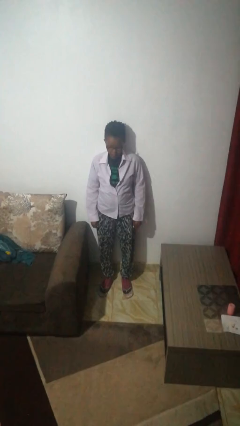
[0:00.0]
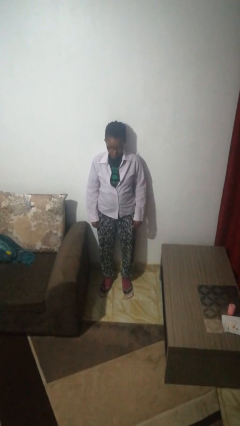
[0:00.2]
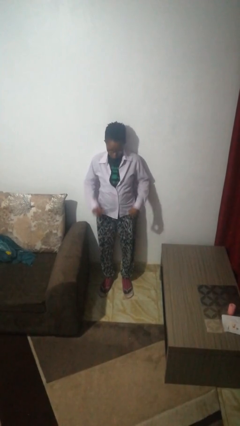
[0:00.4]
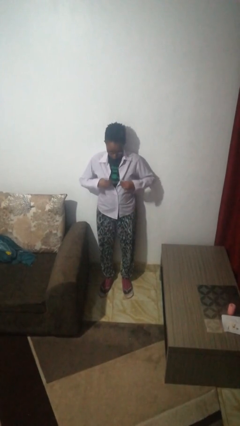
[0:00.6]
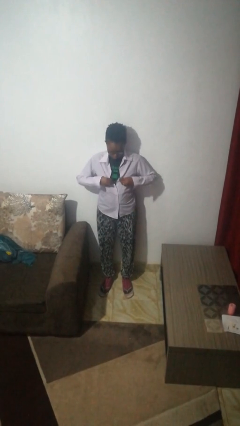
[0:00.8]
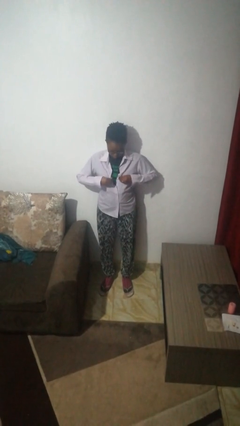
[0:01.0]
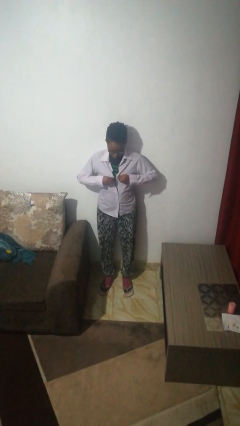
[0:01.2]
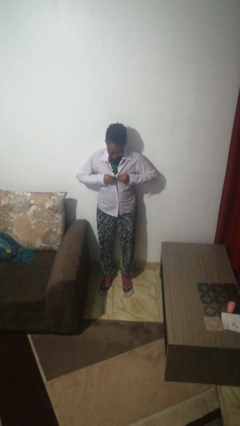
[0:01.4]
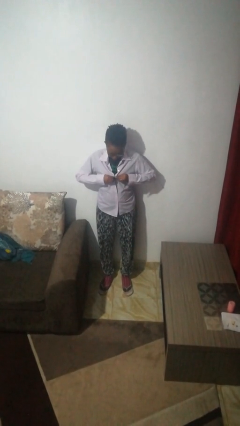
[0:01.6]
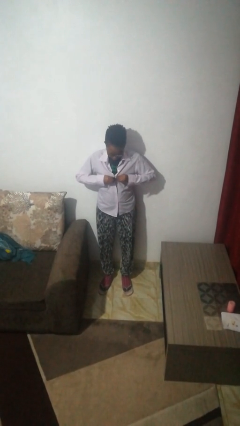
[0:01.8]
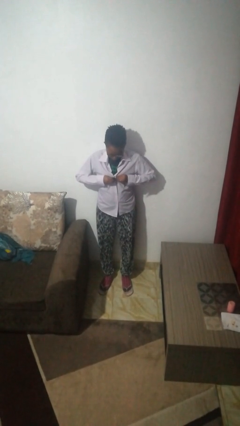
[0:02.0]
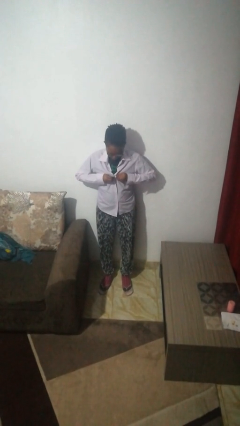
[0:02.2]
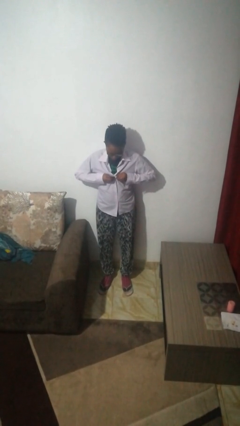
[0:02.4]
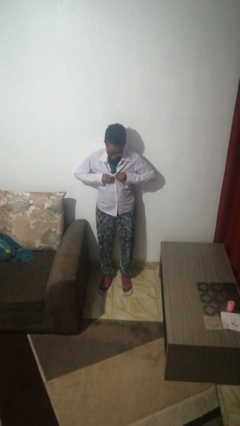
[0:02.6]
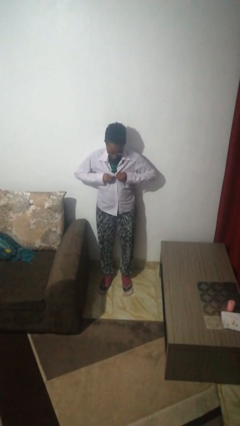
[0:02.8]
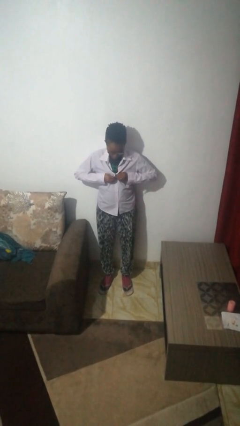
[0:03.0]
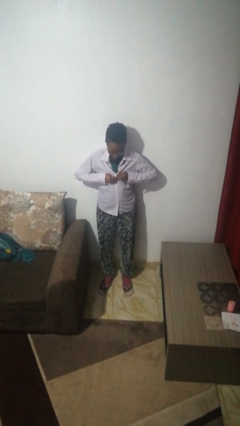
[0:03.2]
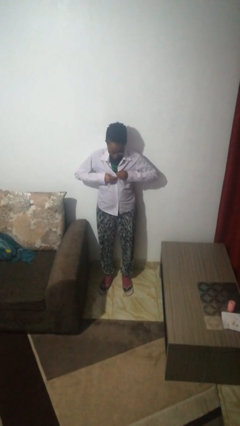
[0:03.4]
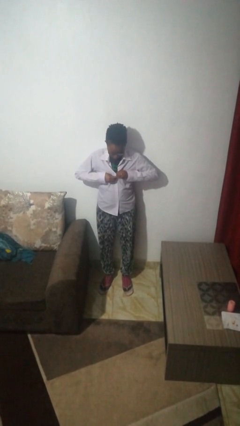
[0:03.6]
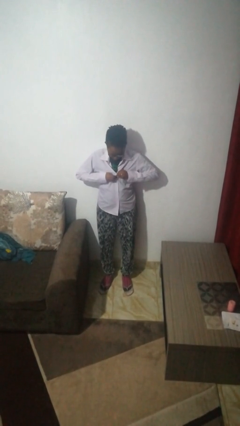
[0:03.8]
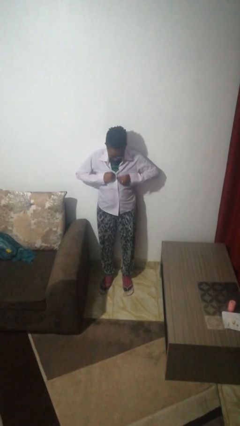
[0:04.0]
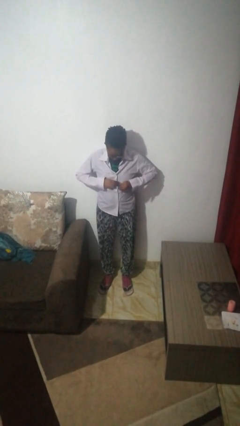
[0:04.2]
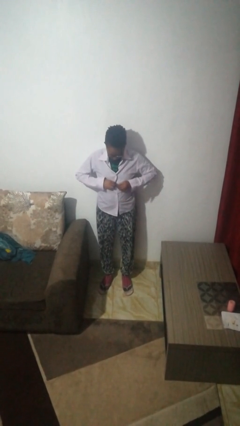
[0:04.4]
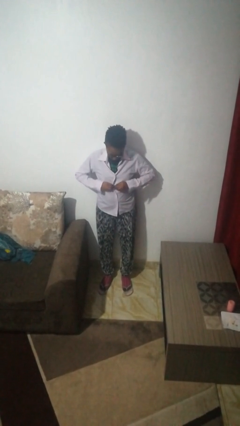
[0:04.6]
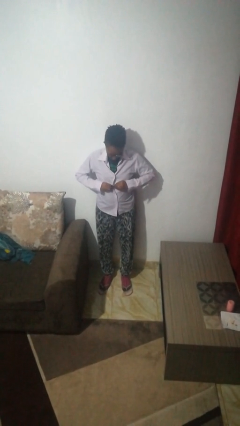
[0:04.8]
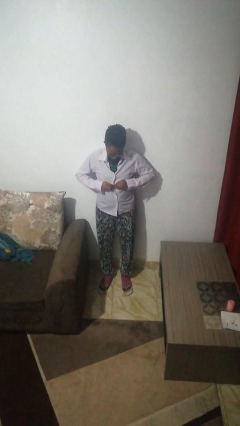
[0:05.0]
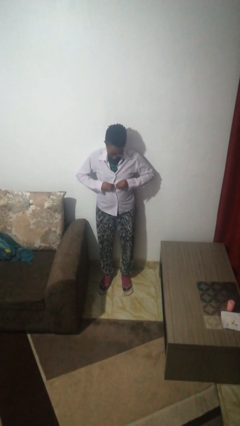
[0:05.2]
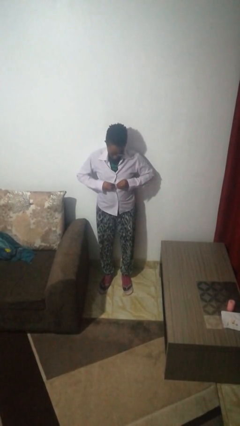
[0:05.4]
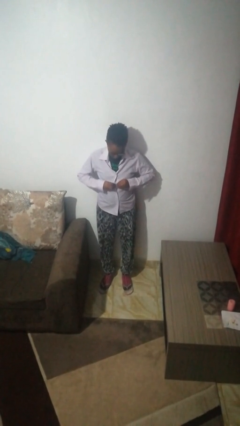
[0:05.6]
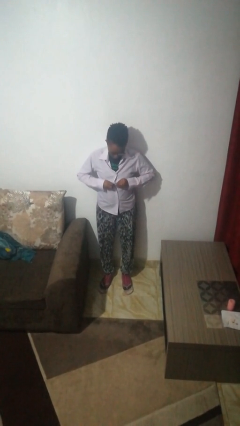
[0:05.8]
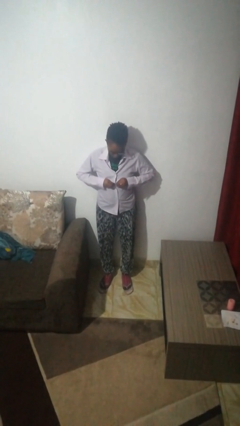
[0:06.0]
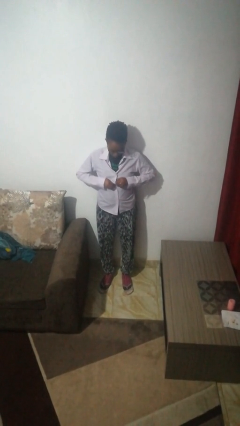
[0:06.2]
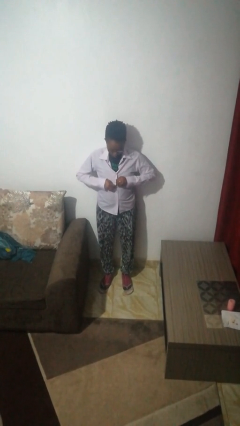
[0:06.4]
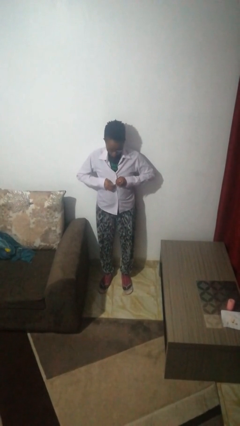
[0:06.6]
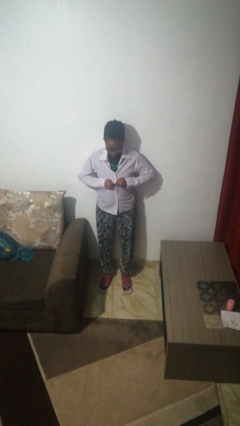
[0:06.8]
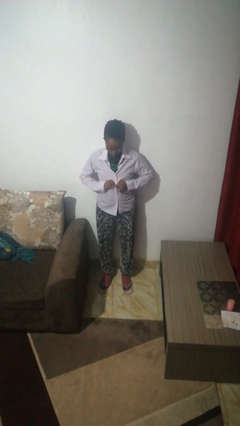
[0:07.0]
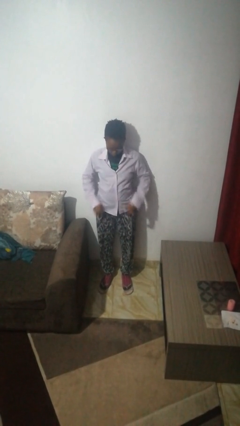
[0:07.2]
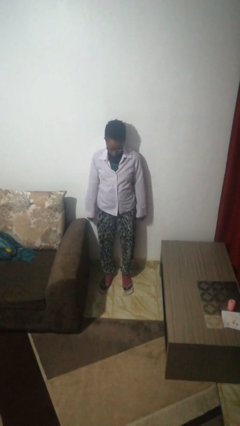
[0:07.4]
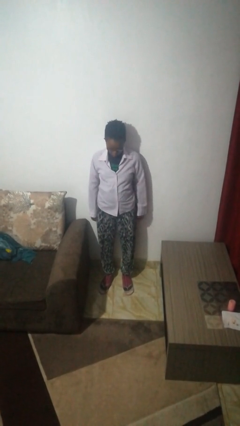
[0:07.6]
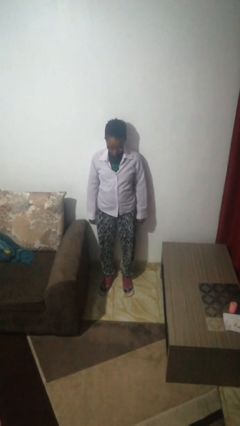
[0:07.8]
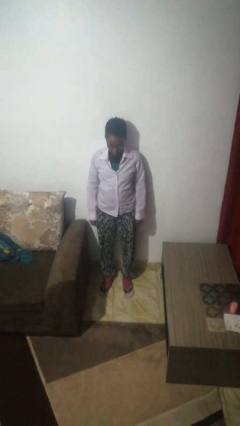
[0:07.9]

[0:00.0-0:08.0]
person buttons shirt

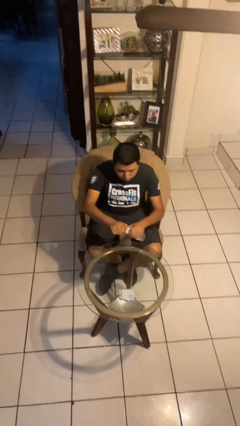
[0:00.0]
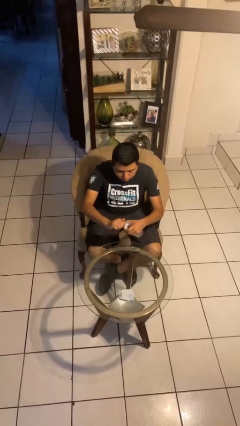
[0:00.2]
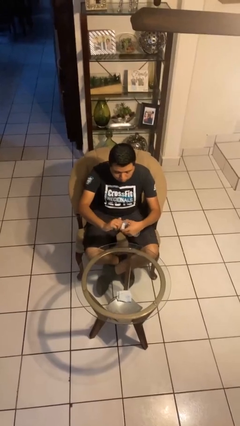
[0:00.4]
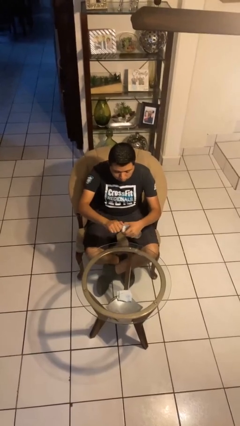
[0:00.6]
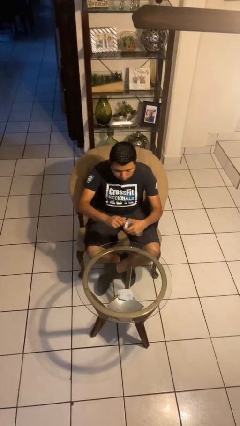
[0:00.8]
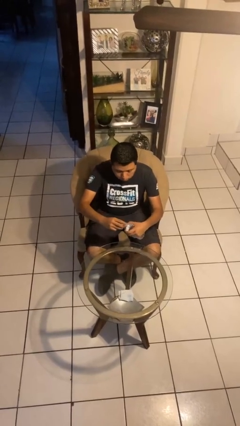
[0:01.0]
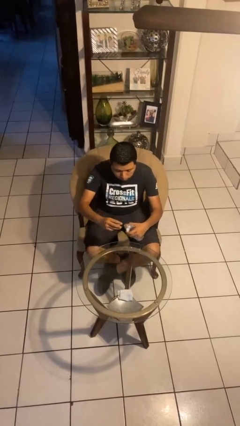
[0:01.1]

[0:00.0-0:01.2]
person unscrews lid from bottle

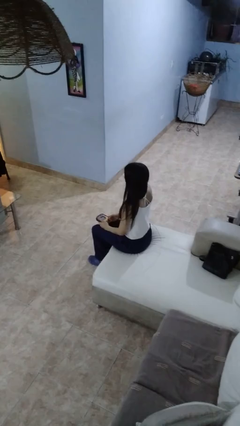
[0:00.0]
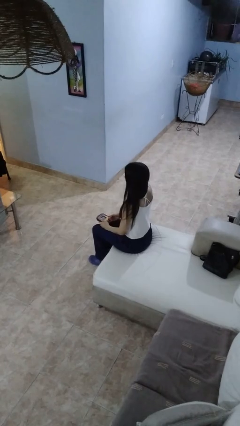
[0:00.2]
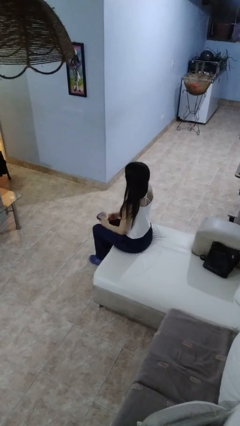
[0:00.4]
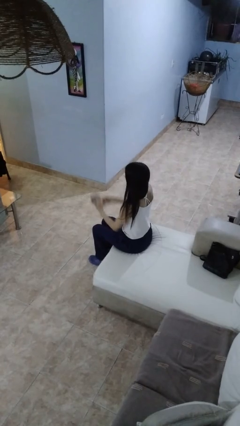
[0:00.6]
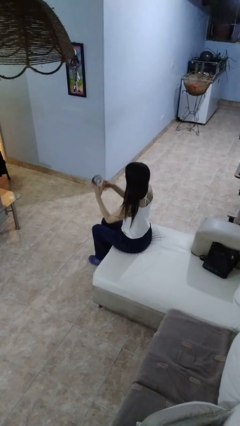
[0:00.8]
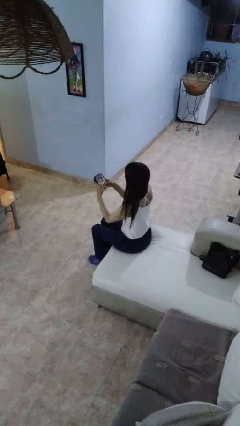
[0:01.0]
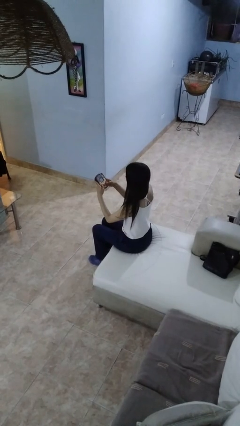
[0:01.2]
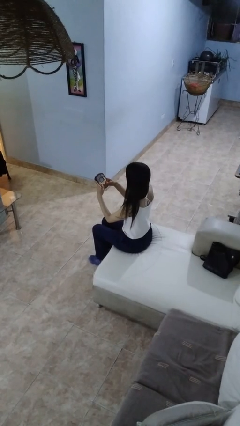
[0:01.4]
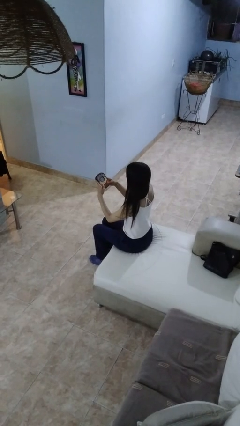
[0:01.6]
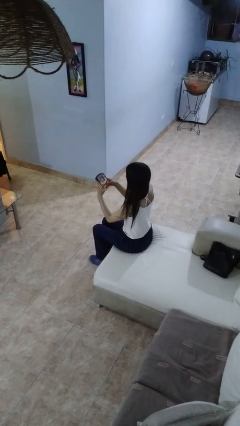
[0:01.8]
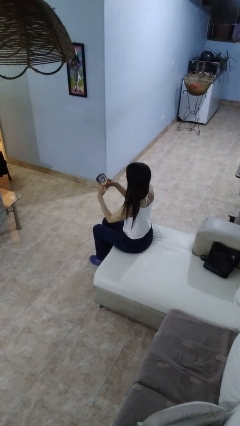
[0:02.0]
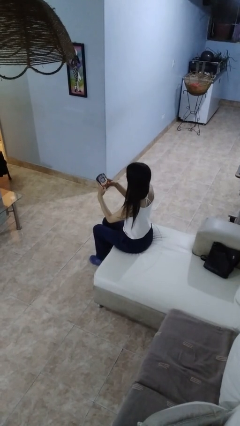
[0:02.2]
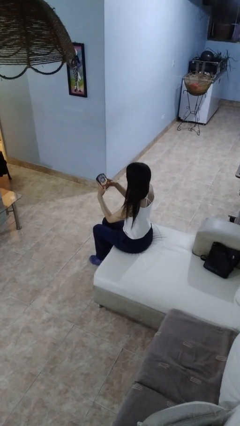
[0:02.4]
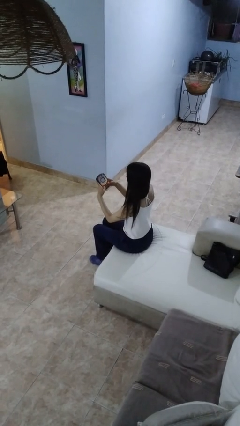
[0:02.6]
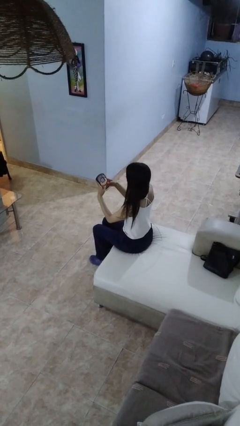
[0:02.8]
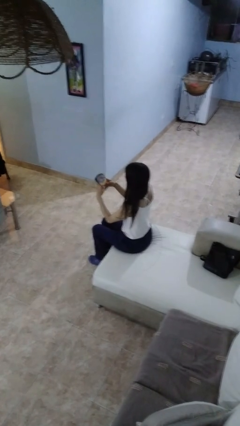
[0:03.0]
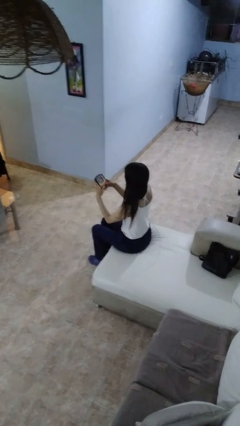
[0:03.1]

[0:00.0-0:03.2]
person interacts with handheld game

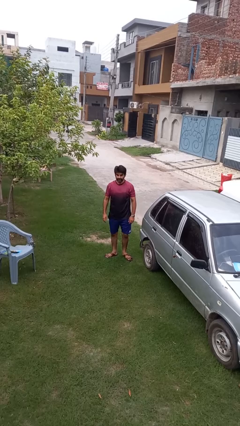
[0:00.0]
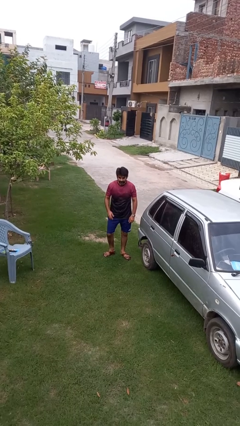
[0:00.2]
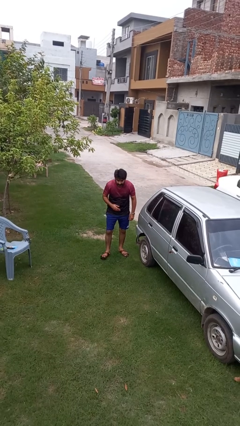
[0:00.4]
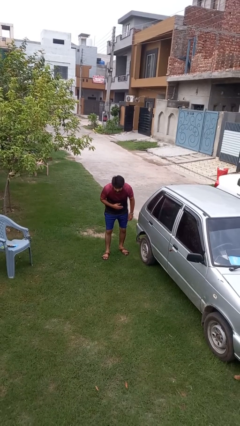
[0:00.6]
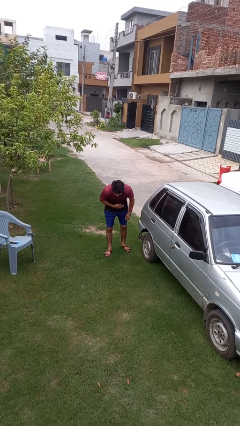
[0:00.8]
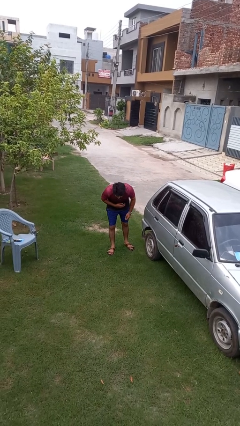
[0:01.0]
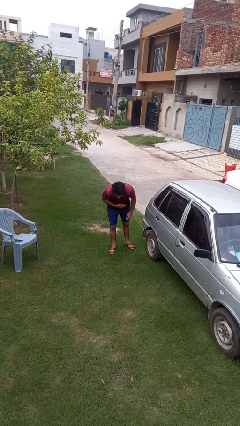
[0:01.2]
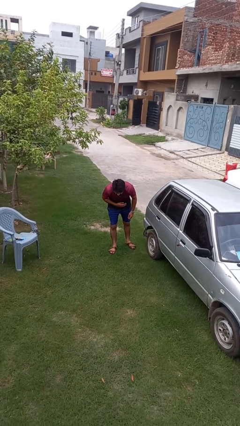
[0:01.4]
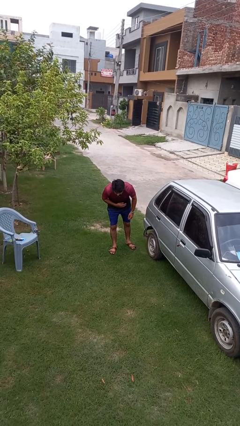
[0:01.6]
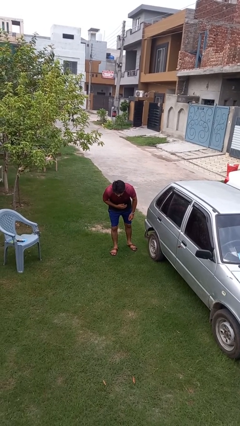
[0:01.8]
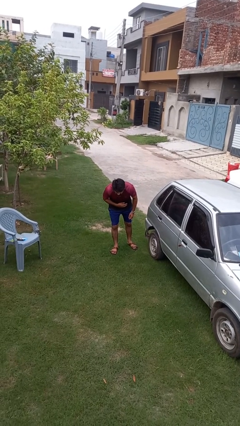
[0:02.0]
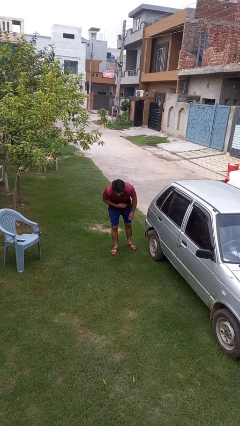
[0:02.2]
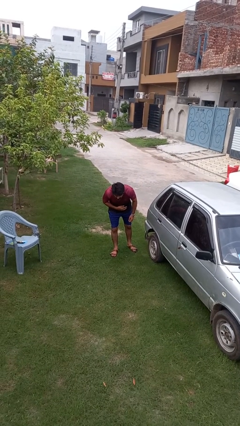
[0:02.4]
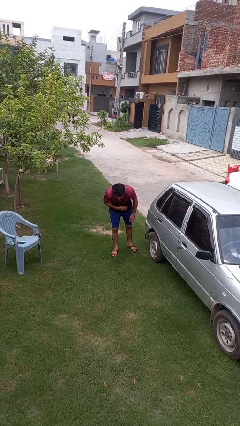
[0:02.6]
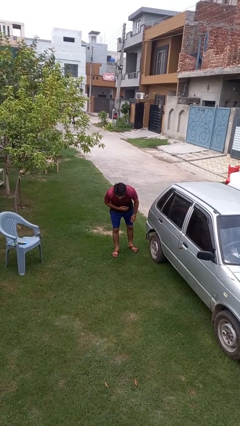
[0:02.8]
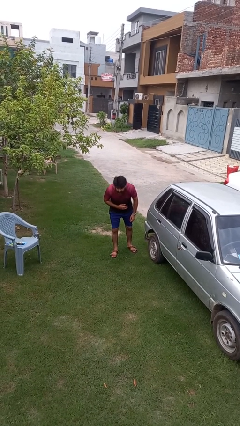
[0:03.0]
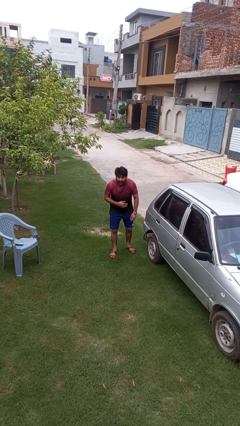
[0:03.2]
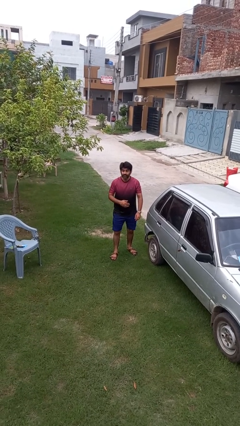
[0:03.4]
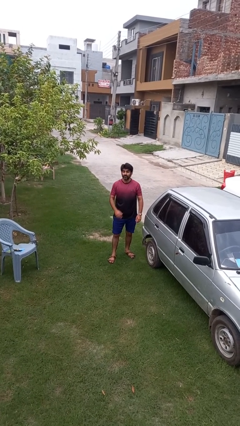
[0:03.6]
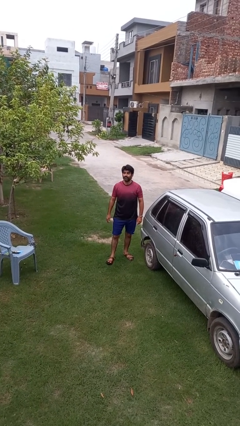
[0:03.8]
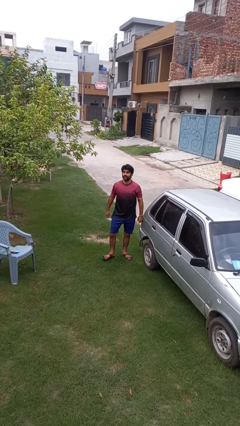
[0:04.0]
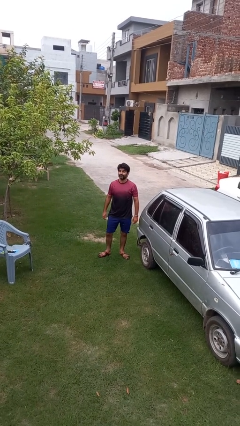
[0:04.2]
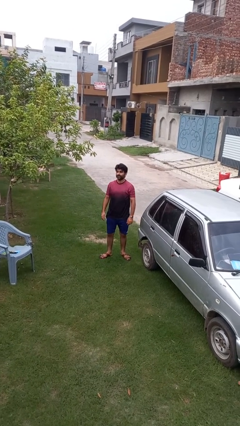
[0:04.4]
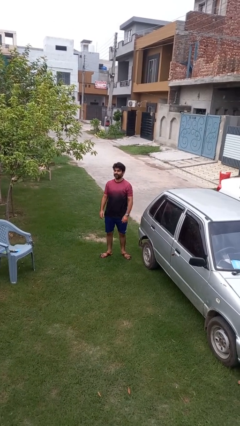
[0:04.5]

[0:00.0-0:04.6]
person bows

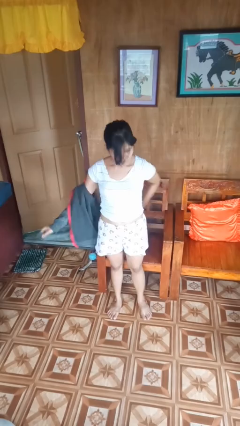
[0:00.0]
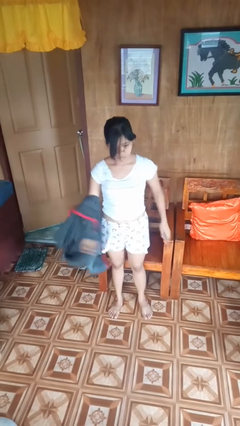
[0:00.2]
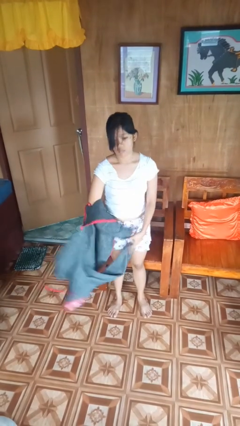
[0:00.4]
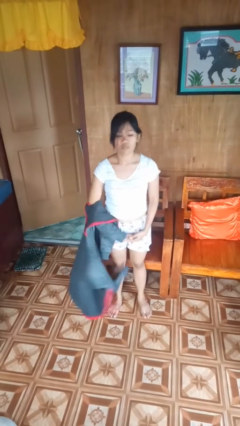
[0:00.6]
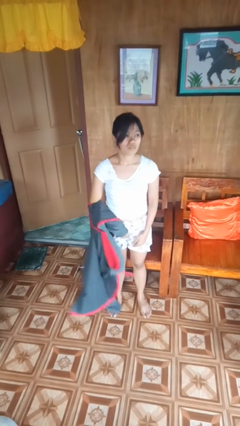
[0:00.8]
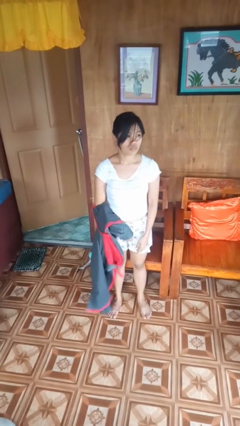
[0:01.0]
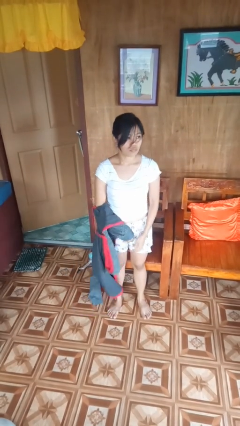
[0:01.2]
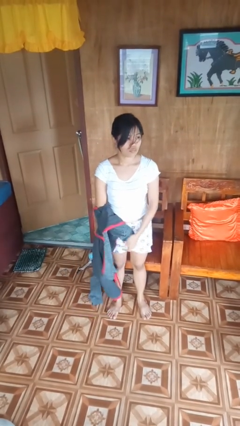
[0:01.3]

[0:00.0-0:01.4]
person takes off jacket
